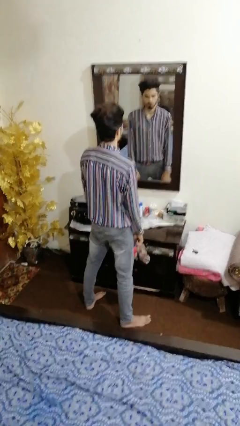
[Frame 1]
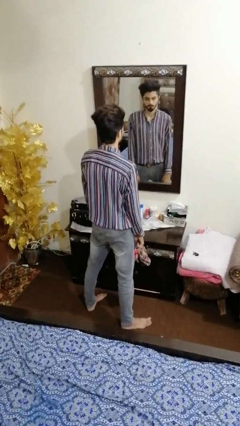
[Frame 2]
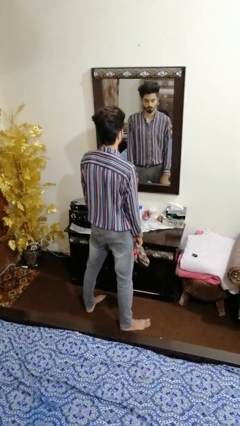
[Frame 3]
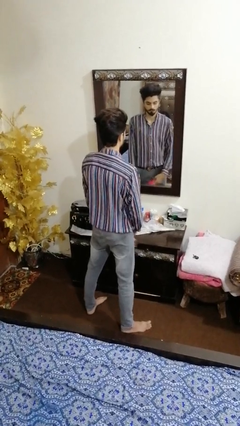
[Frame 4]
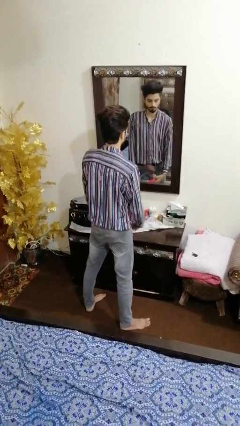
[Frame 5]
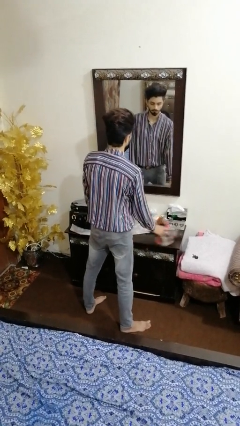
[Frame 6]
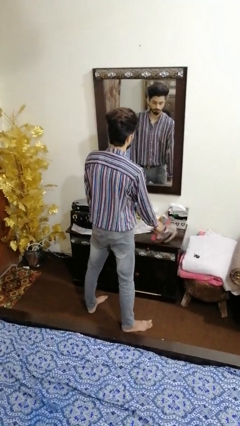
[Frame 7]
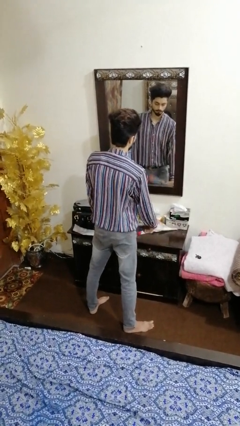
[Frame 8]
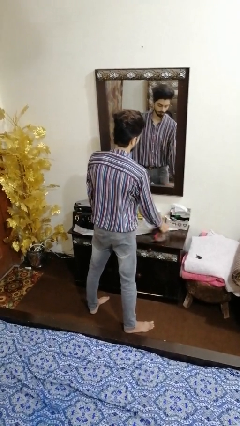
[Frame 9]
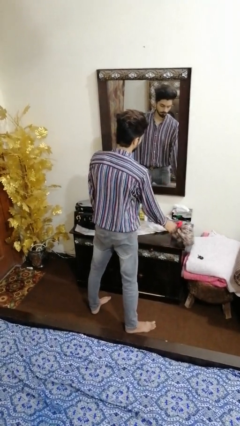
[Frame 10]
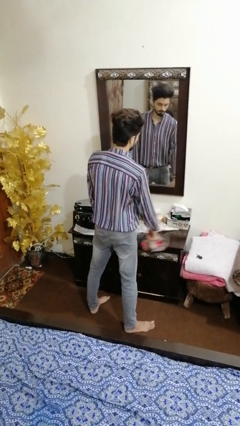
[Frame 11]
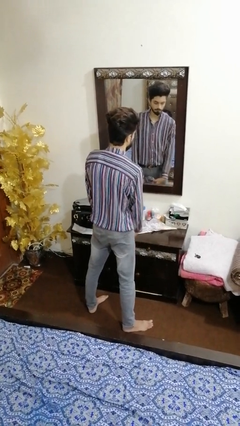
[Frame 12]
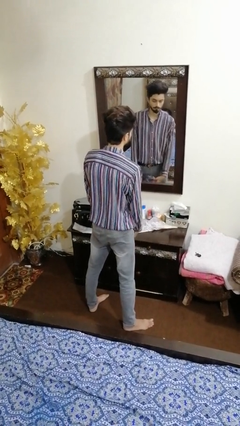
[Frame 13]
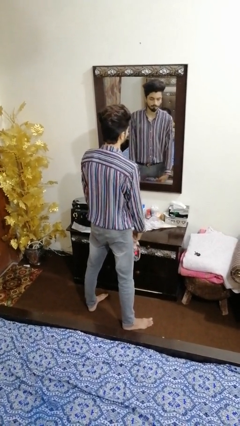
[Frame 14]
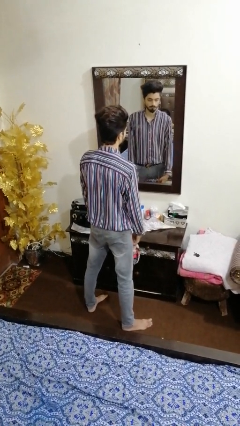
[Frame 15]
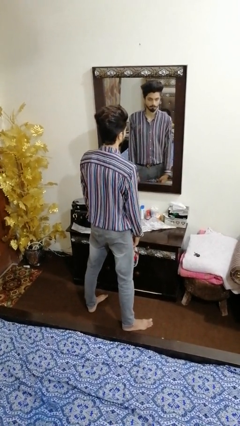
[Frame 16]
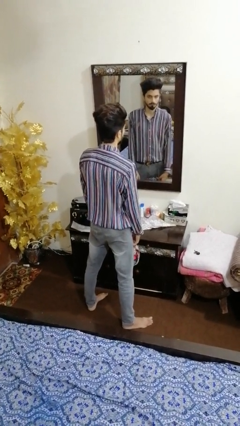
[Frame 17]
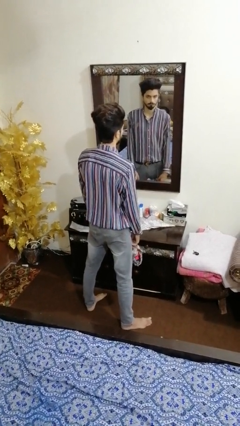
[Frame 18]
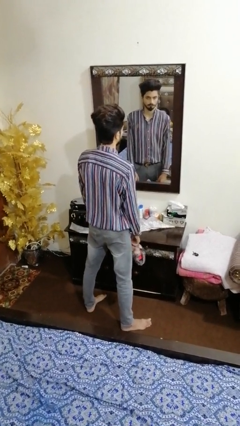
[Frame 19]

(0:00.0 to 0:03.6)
person cleans table with rag

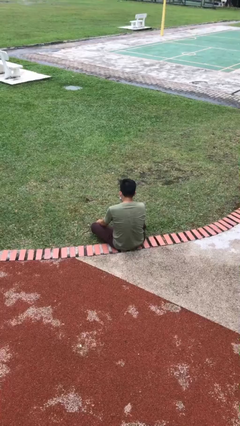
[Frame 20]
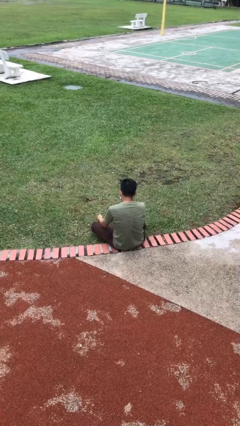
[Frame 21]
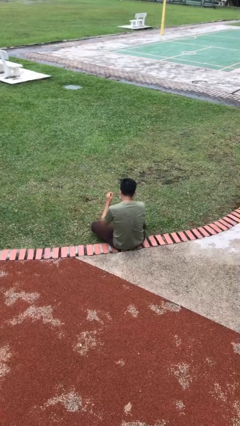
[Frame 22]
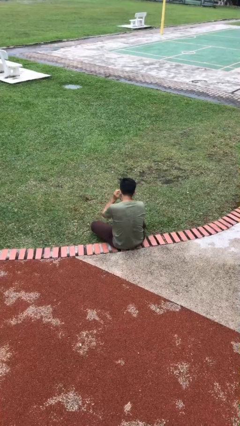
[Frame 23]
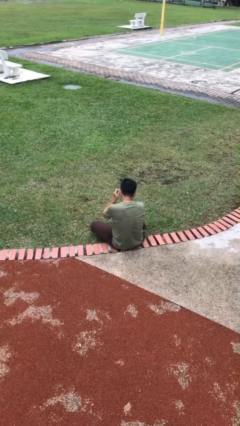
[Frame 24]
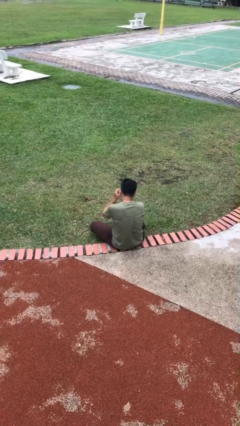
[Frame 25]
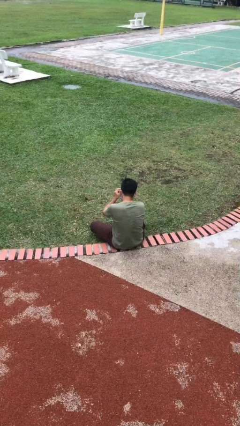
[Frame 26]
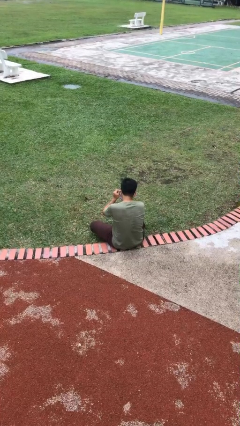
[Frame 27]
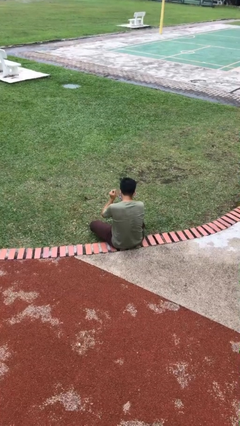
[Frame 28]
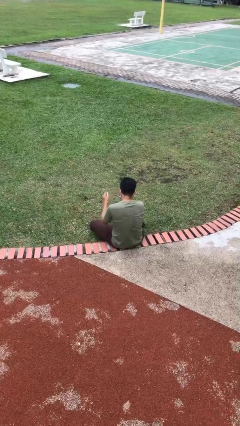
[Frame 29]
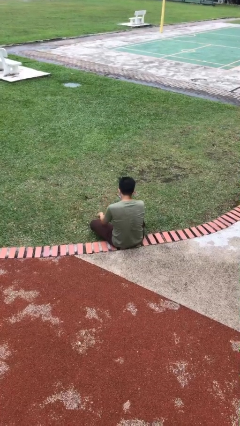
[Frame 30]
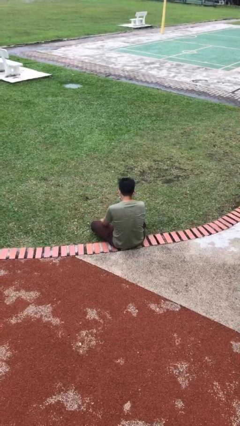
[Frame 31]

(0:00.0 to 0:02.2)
person touches earlobe

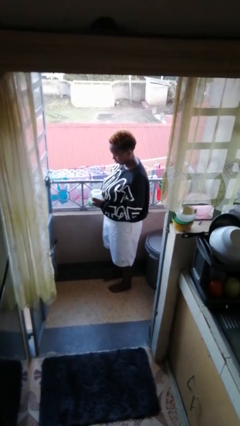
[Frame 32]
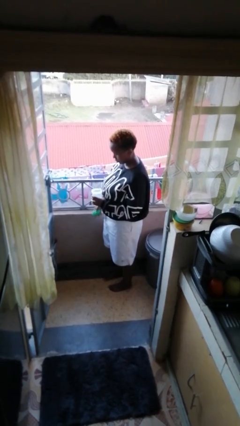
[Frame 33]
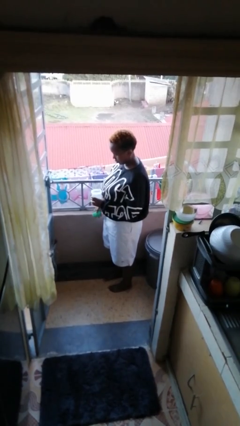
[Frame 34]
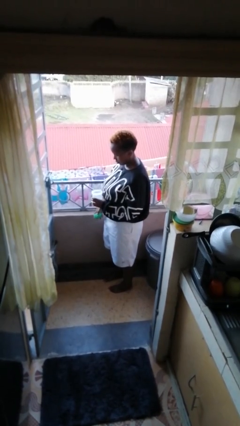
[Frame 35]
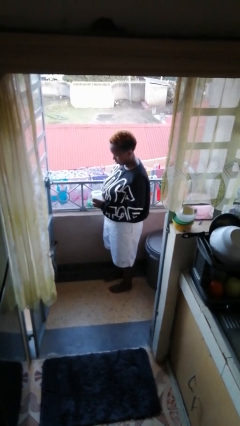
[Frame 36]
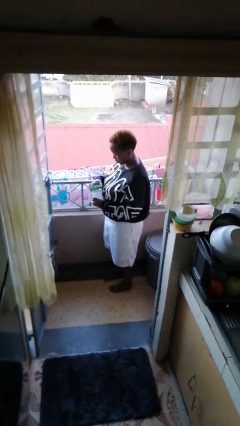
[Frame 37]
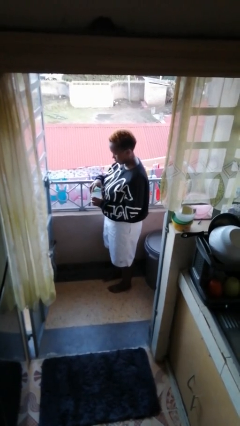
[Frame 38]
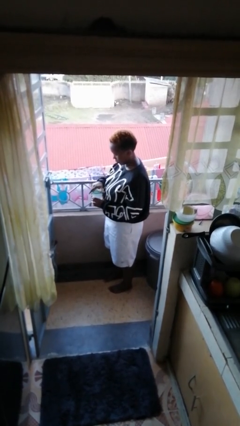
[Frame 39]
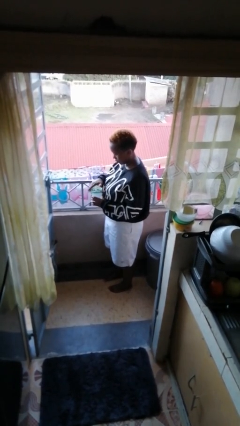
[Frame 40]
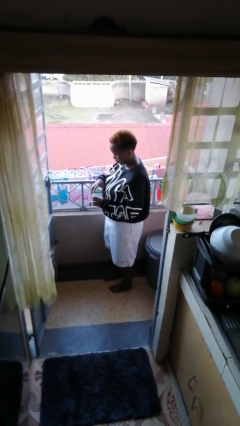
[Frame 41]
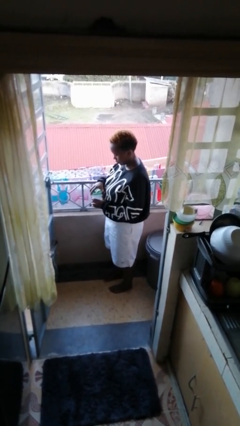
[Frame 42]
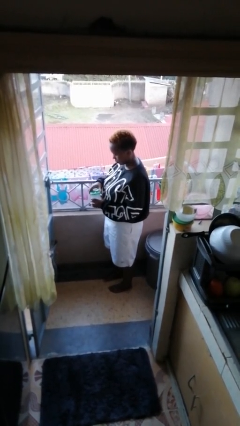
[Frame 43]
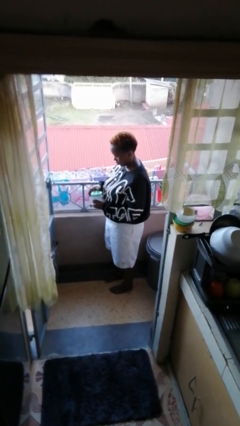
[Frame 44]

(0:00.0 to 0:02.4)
person closes jar

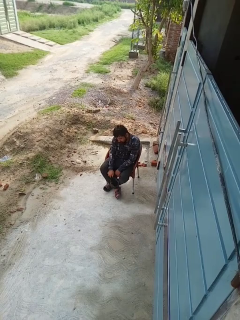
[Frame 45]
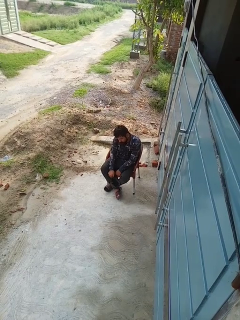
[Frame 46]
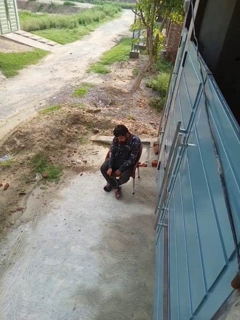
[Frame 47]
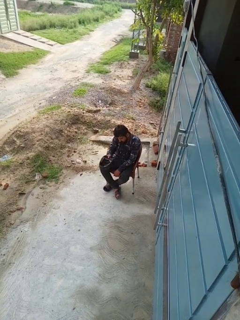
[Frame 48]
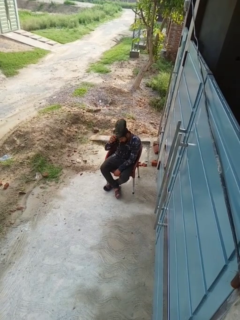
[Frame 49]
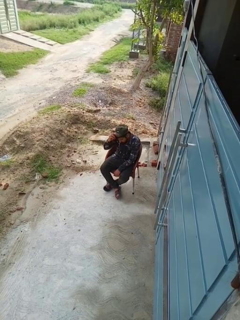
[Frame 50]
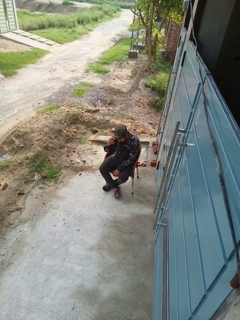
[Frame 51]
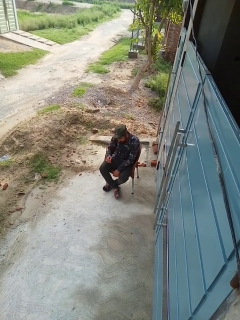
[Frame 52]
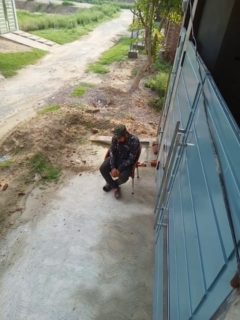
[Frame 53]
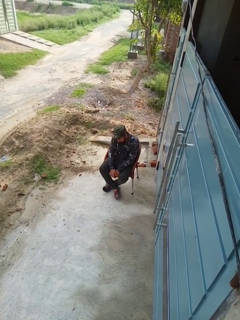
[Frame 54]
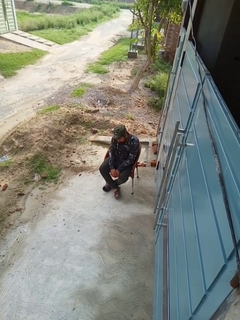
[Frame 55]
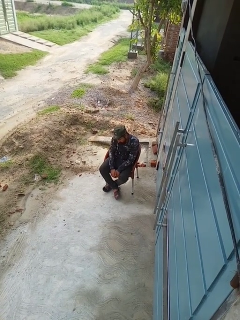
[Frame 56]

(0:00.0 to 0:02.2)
person puts on hat

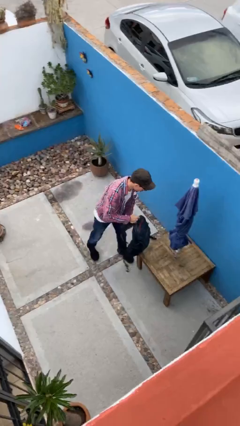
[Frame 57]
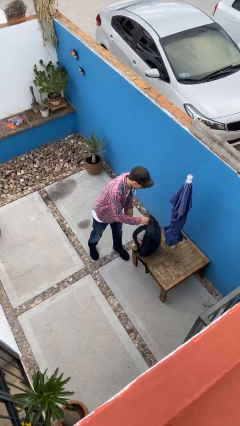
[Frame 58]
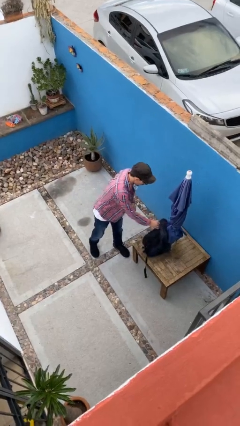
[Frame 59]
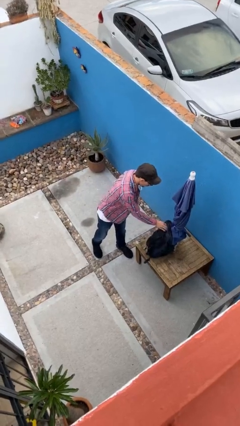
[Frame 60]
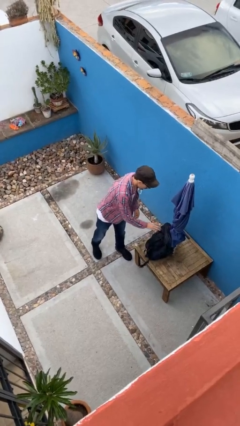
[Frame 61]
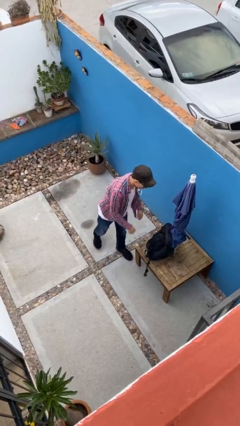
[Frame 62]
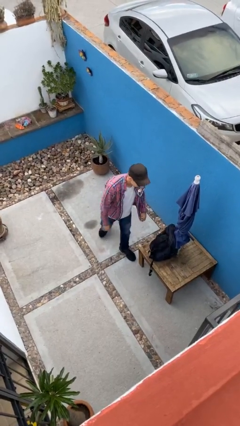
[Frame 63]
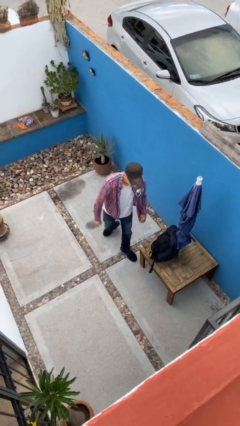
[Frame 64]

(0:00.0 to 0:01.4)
person puts down object on table

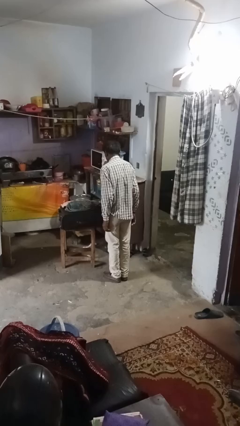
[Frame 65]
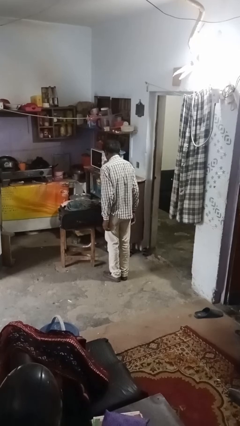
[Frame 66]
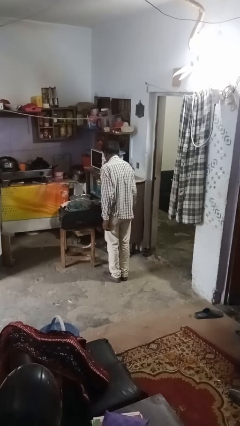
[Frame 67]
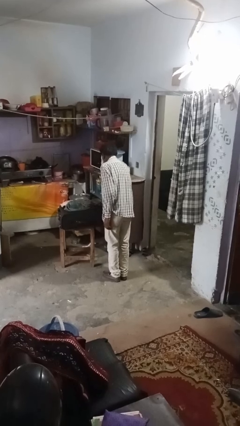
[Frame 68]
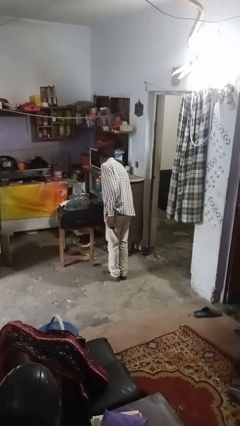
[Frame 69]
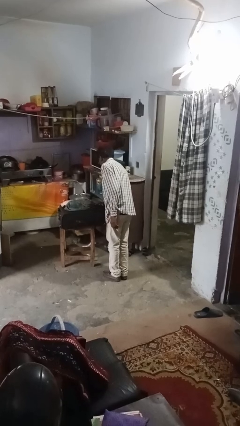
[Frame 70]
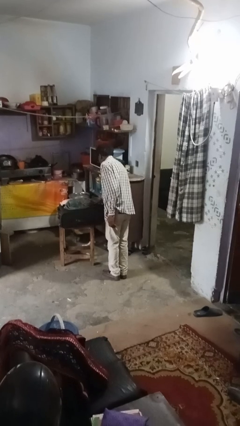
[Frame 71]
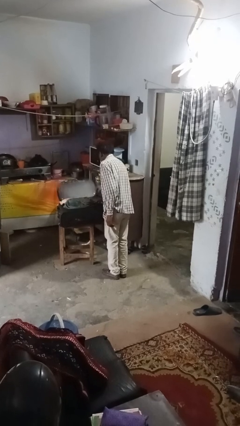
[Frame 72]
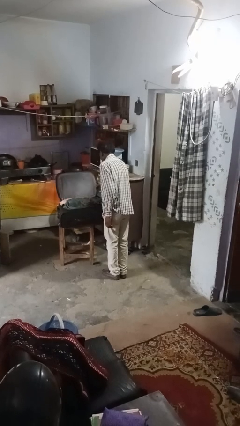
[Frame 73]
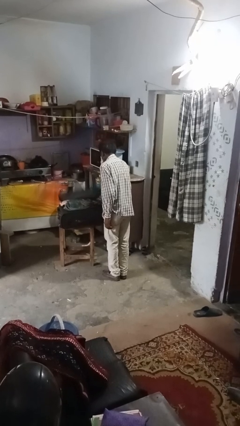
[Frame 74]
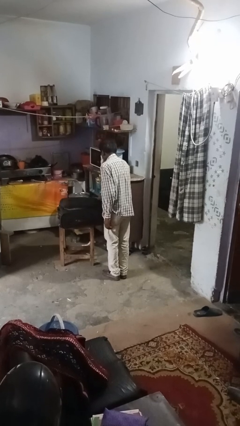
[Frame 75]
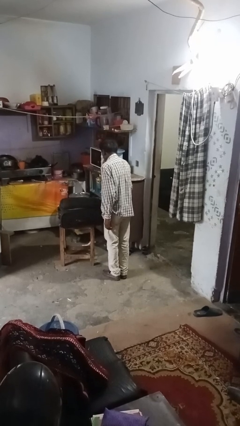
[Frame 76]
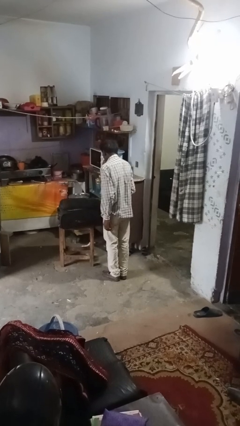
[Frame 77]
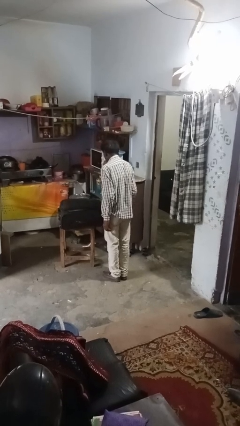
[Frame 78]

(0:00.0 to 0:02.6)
person closes suitcase

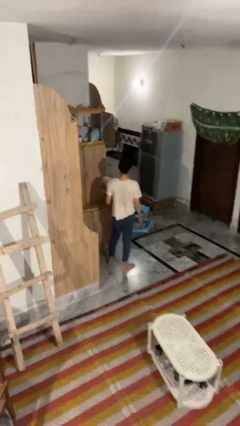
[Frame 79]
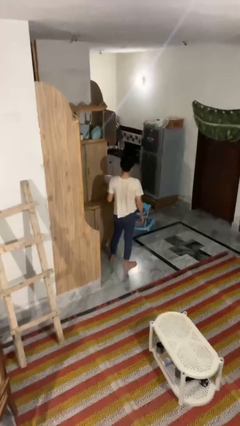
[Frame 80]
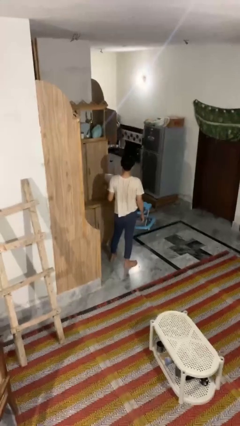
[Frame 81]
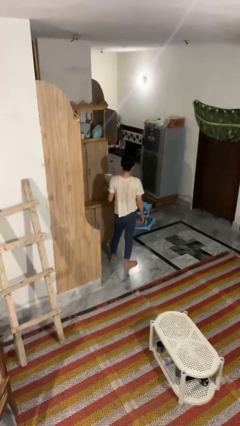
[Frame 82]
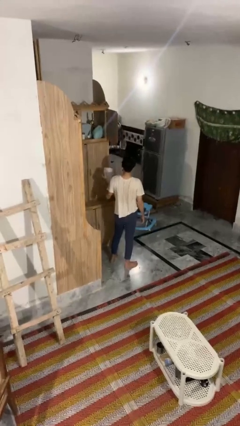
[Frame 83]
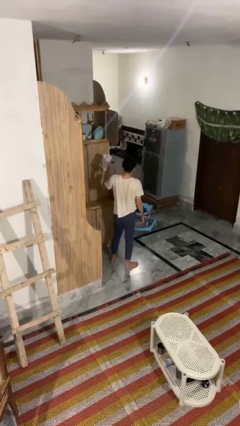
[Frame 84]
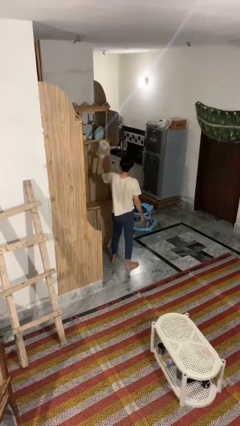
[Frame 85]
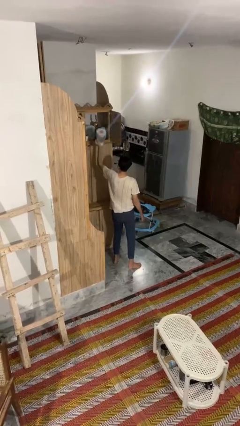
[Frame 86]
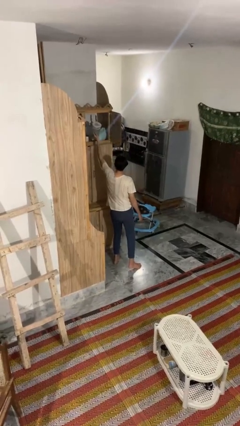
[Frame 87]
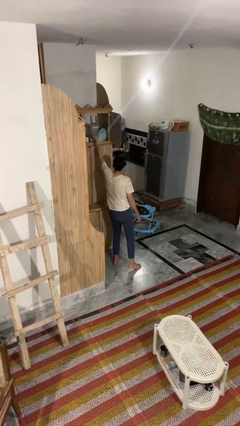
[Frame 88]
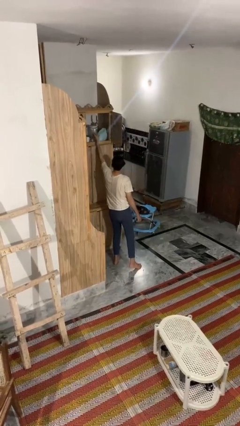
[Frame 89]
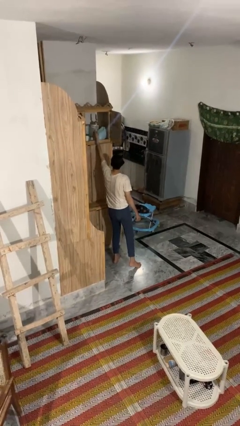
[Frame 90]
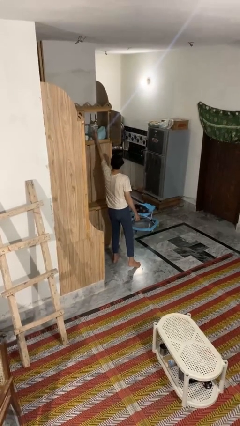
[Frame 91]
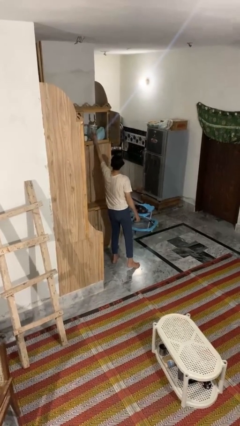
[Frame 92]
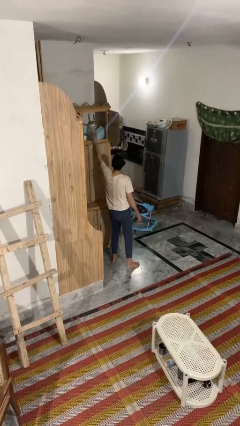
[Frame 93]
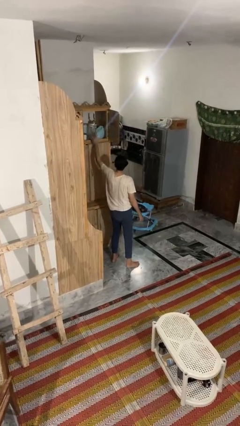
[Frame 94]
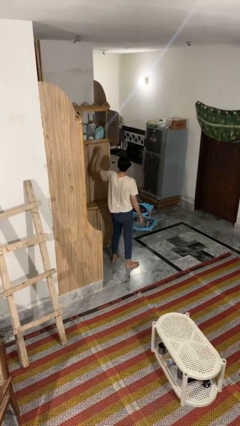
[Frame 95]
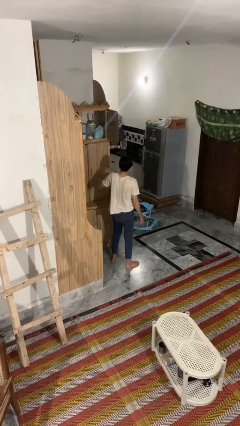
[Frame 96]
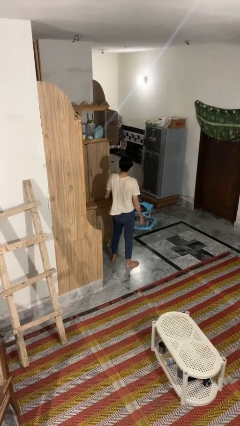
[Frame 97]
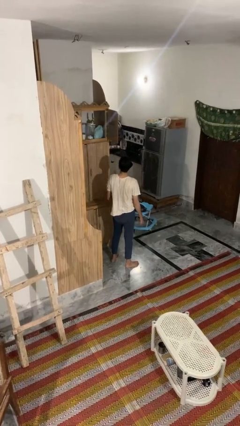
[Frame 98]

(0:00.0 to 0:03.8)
person puts down object on shelf
